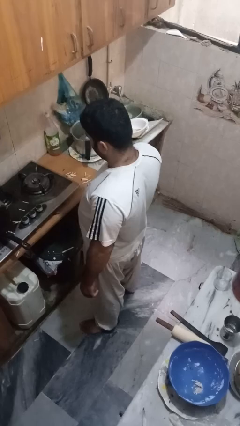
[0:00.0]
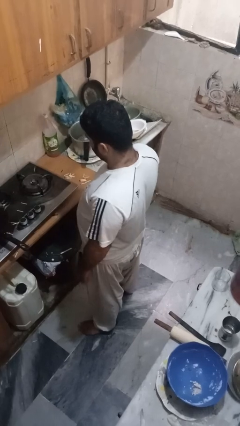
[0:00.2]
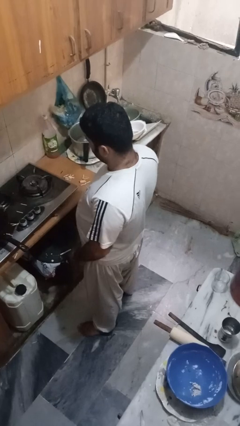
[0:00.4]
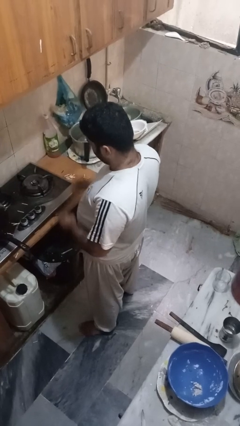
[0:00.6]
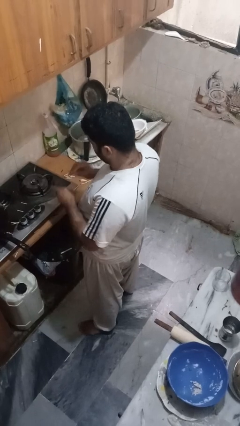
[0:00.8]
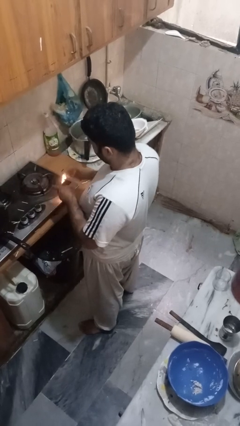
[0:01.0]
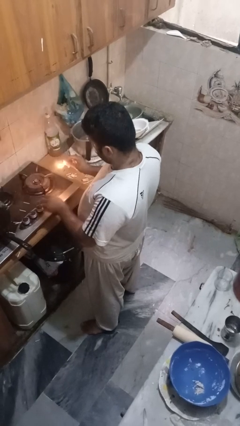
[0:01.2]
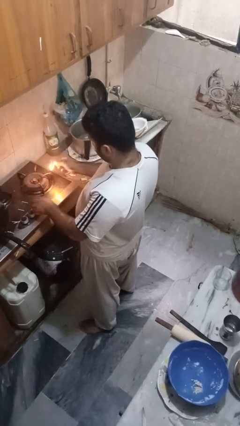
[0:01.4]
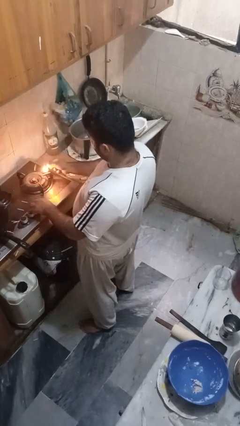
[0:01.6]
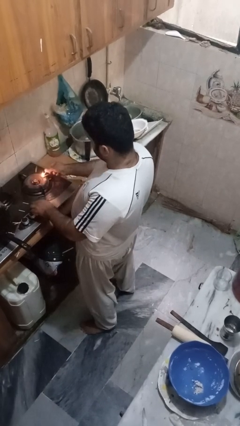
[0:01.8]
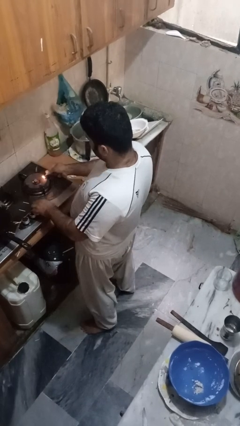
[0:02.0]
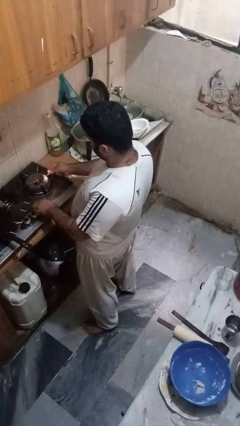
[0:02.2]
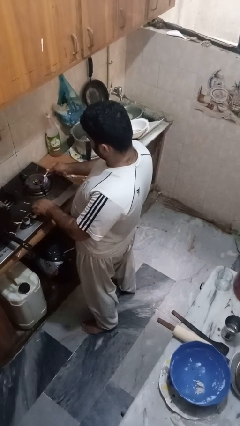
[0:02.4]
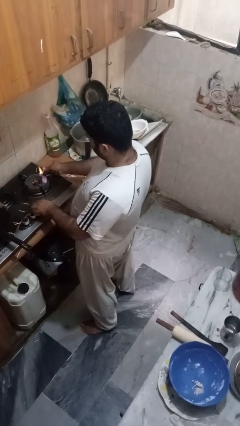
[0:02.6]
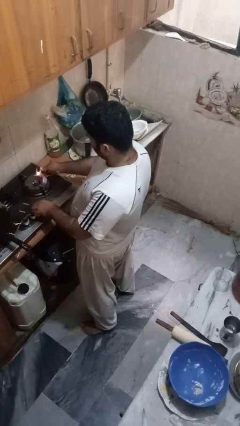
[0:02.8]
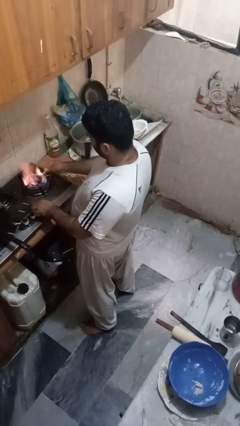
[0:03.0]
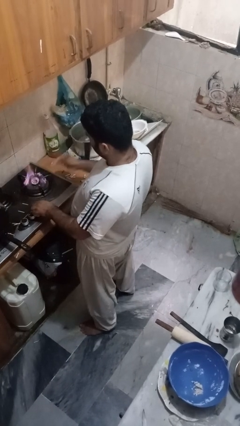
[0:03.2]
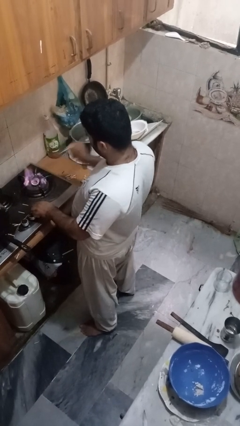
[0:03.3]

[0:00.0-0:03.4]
person turns on stovetop

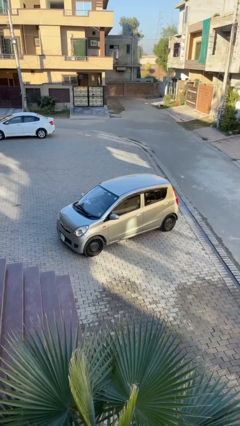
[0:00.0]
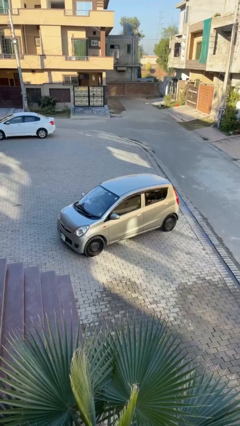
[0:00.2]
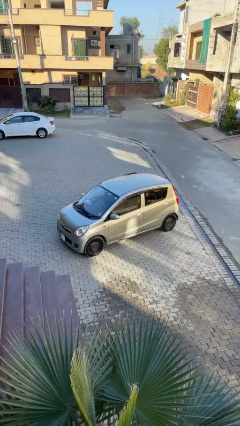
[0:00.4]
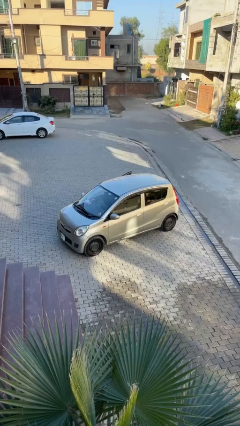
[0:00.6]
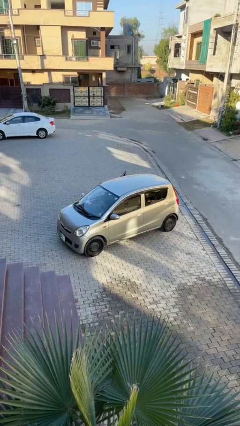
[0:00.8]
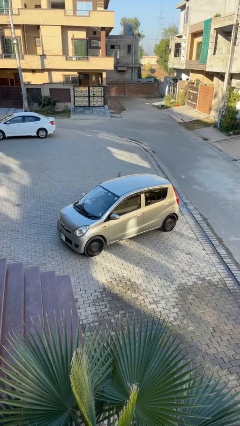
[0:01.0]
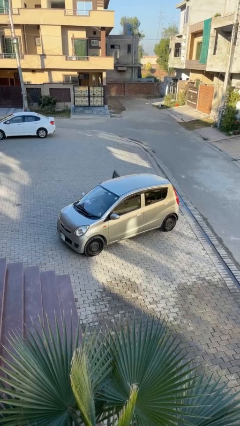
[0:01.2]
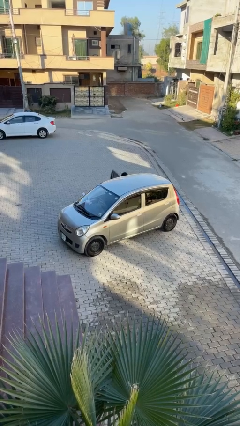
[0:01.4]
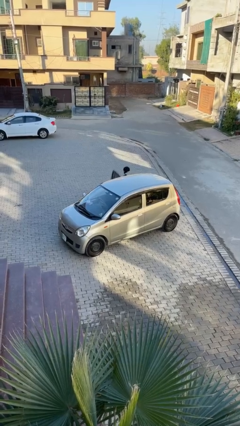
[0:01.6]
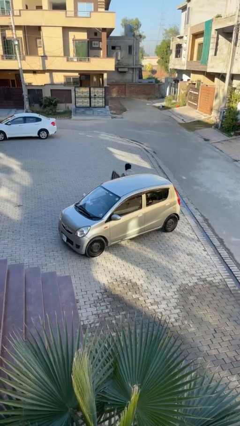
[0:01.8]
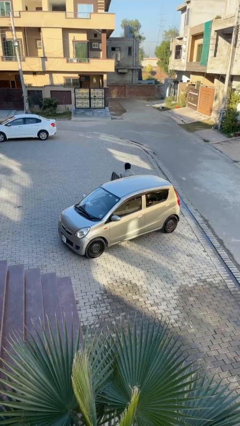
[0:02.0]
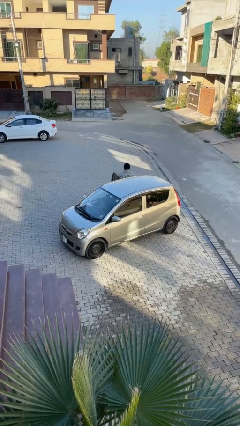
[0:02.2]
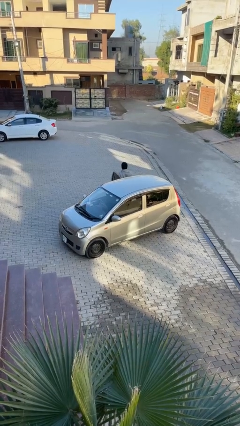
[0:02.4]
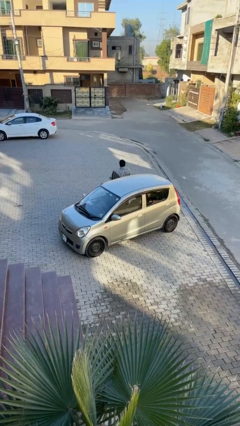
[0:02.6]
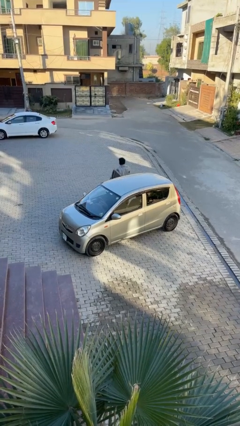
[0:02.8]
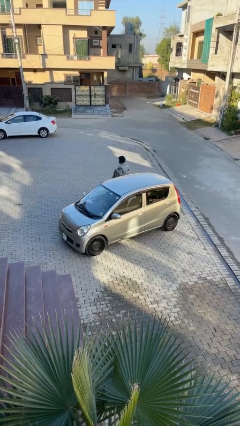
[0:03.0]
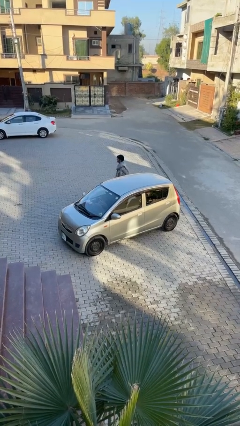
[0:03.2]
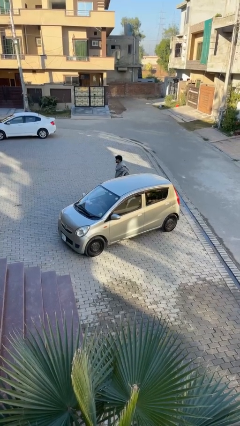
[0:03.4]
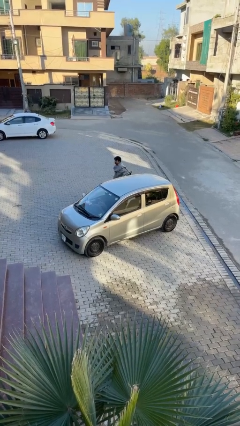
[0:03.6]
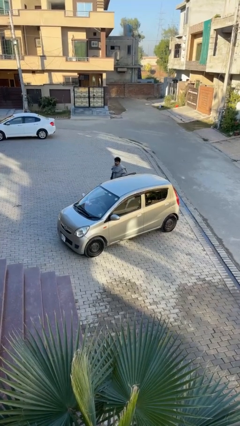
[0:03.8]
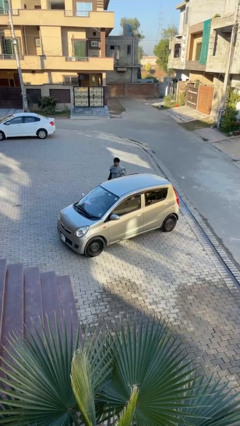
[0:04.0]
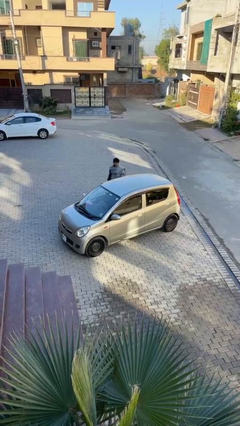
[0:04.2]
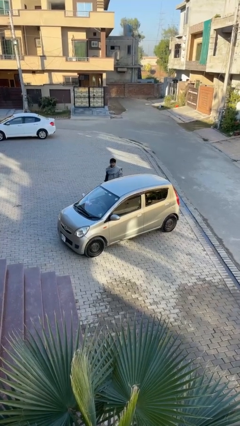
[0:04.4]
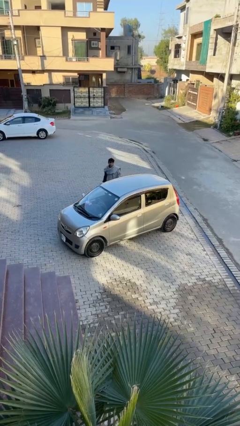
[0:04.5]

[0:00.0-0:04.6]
car drops off person

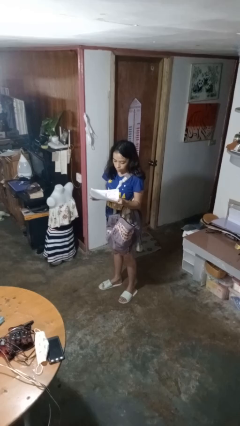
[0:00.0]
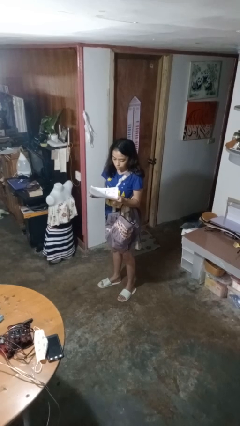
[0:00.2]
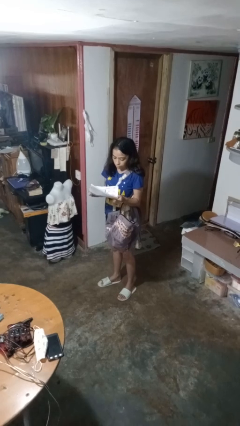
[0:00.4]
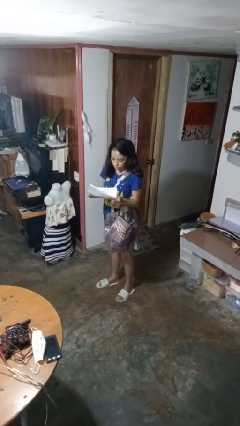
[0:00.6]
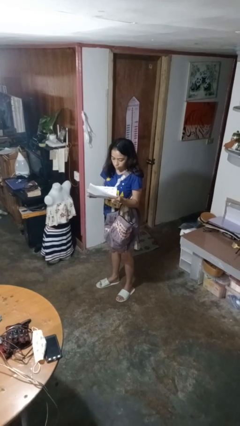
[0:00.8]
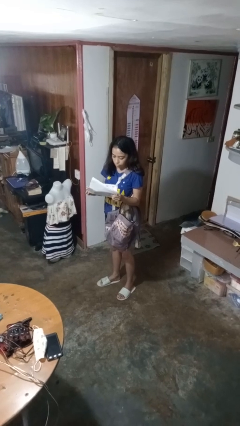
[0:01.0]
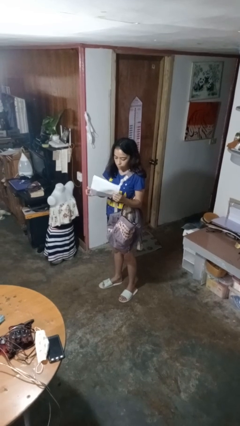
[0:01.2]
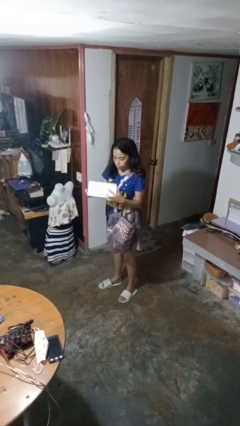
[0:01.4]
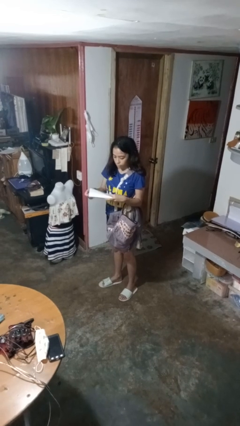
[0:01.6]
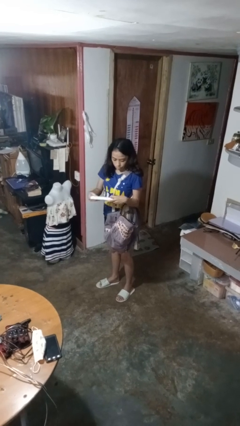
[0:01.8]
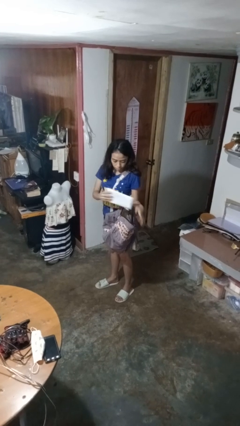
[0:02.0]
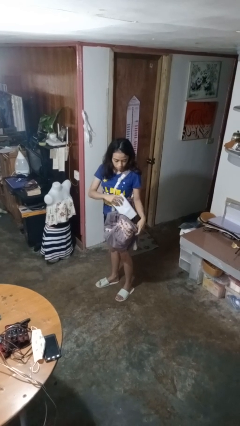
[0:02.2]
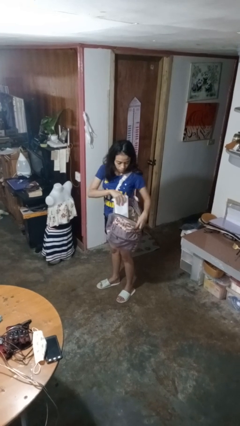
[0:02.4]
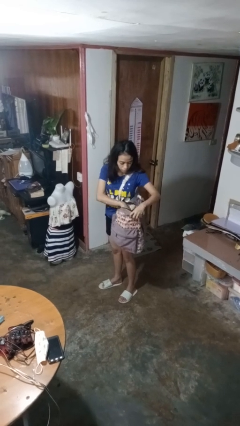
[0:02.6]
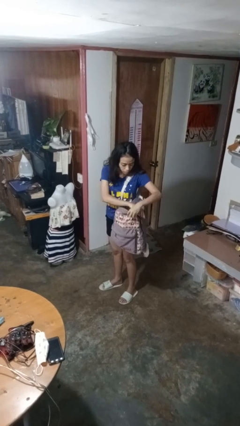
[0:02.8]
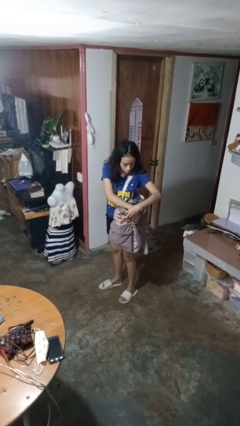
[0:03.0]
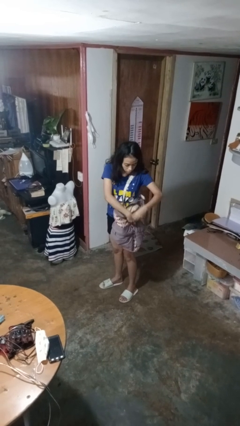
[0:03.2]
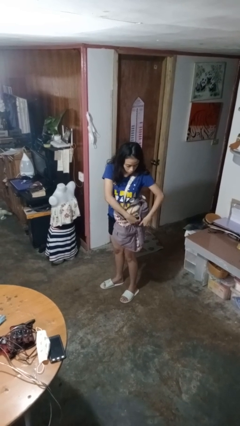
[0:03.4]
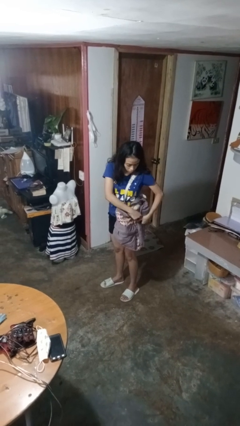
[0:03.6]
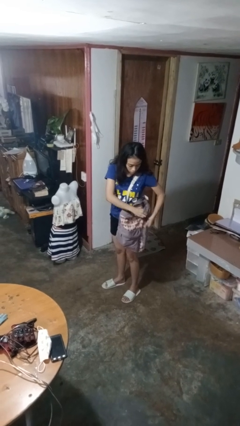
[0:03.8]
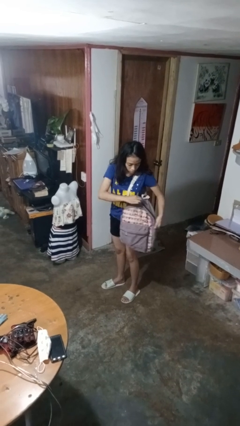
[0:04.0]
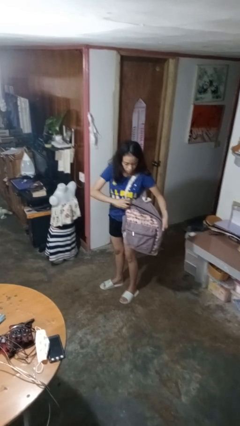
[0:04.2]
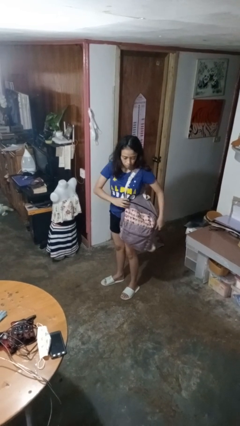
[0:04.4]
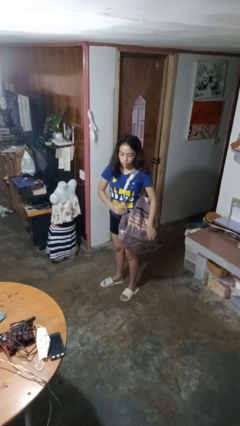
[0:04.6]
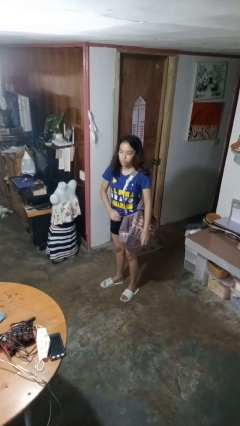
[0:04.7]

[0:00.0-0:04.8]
person puts object into backpack

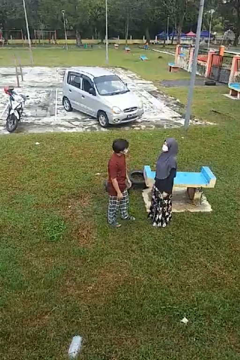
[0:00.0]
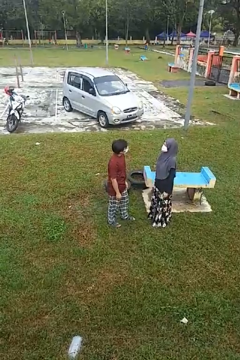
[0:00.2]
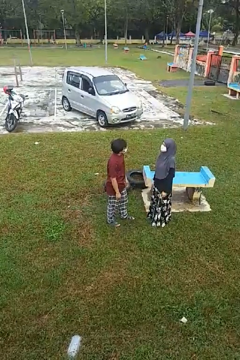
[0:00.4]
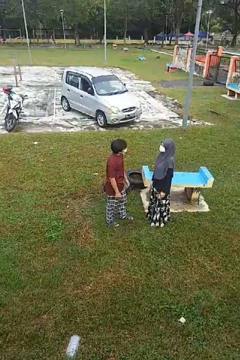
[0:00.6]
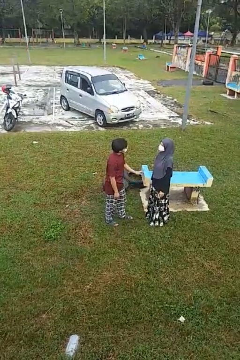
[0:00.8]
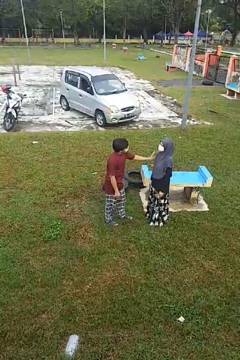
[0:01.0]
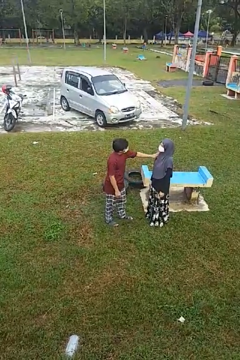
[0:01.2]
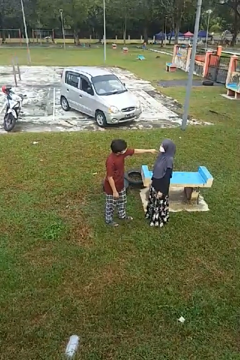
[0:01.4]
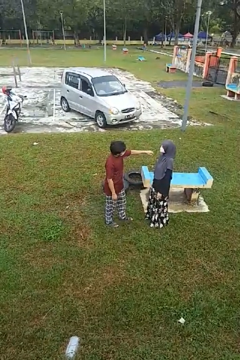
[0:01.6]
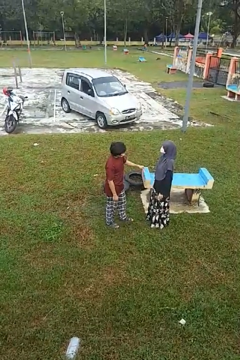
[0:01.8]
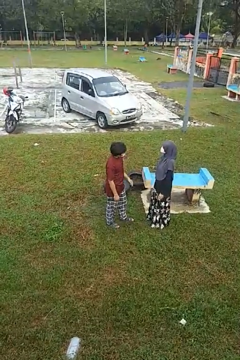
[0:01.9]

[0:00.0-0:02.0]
person shoves person

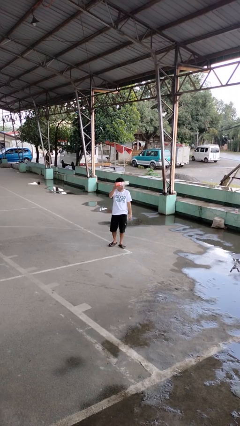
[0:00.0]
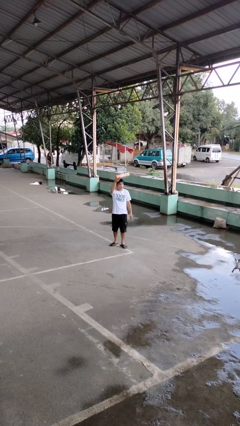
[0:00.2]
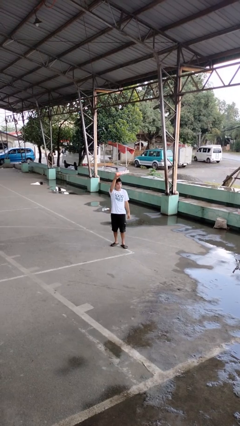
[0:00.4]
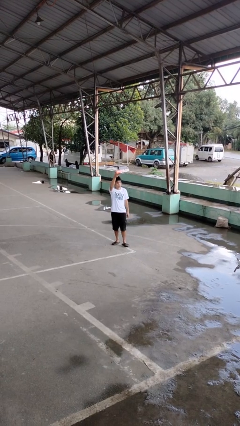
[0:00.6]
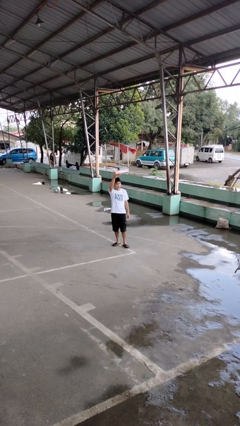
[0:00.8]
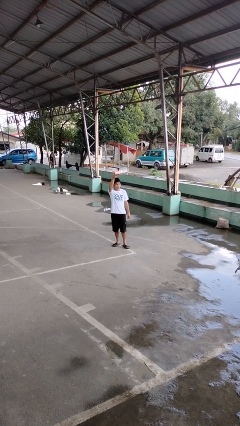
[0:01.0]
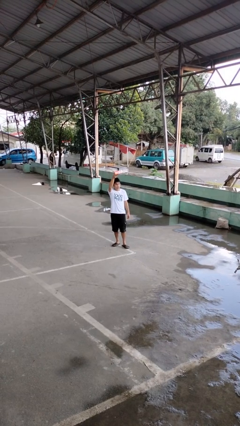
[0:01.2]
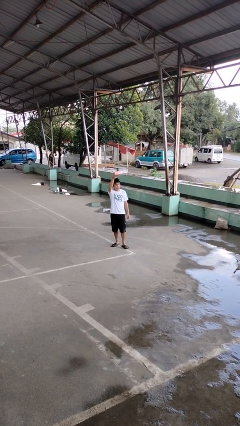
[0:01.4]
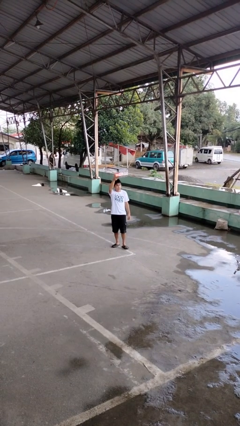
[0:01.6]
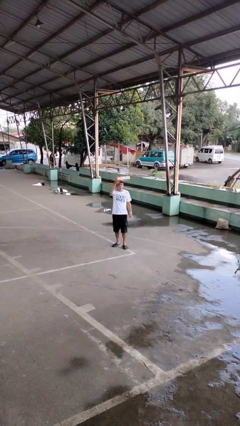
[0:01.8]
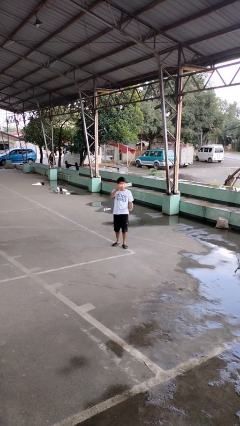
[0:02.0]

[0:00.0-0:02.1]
person holds object above head

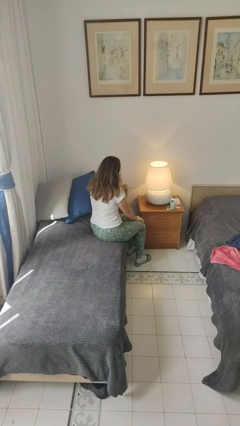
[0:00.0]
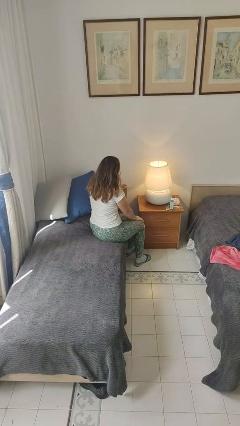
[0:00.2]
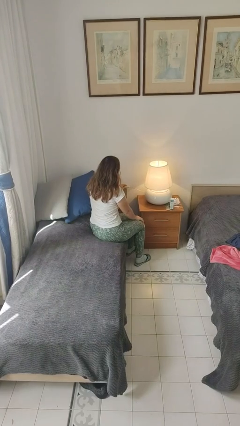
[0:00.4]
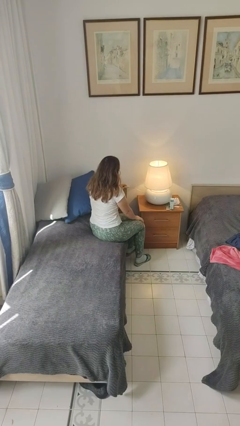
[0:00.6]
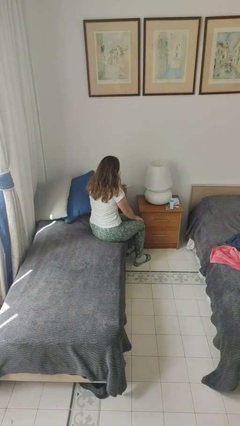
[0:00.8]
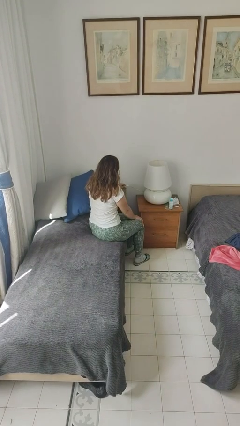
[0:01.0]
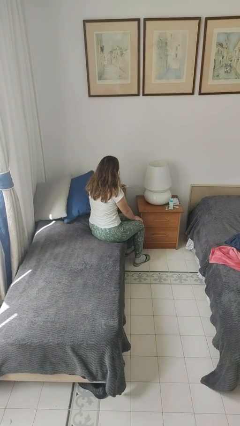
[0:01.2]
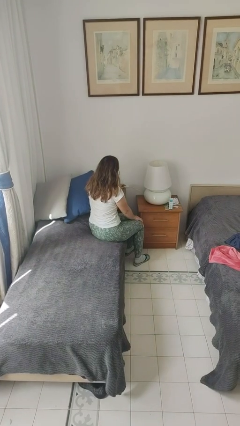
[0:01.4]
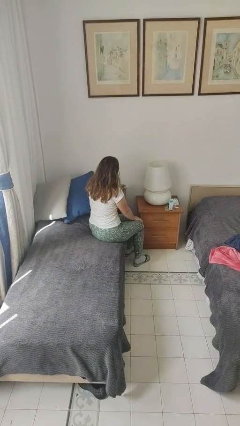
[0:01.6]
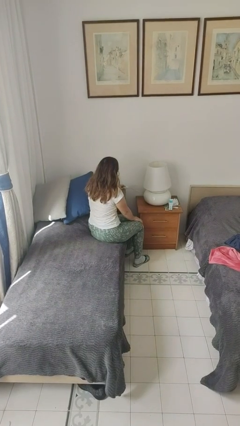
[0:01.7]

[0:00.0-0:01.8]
person turns off lamp
